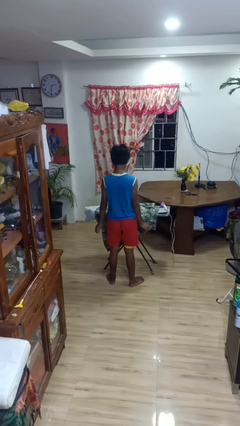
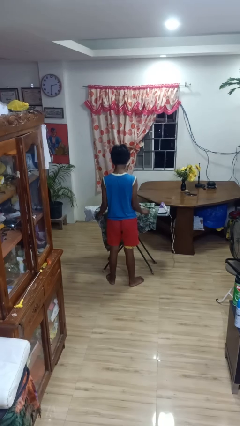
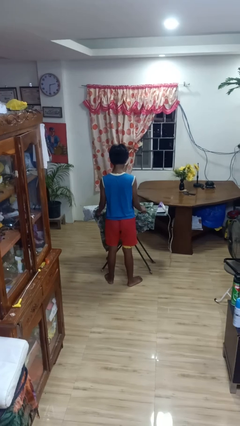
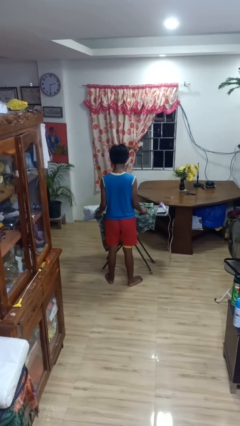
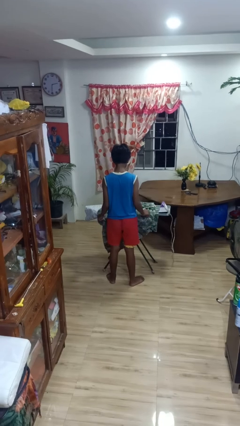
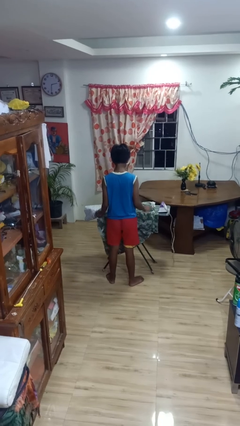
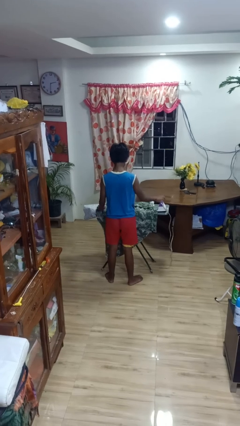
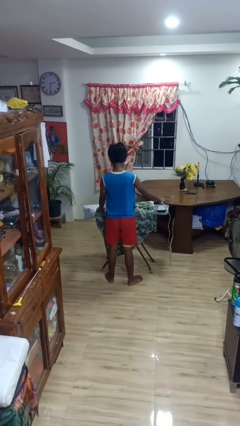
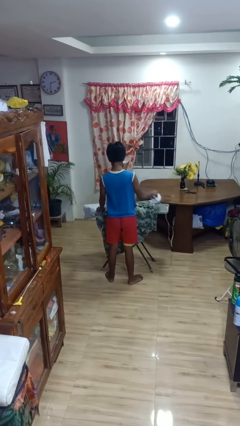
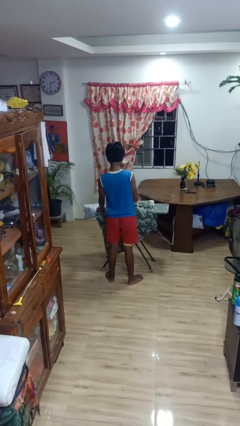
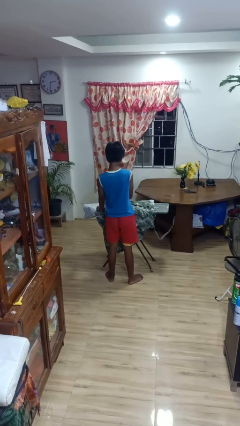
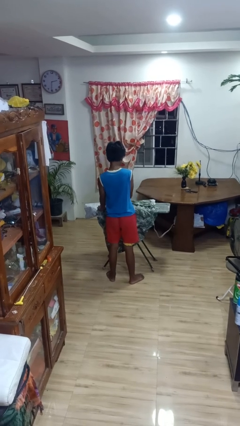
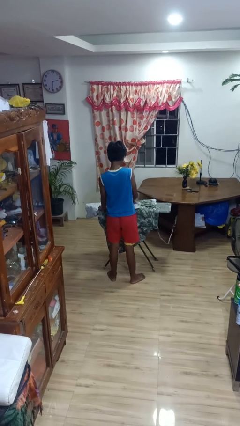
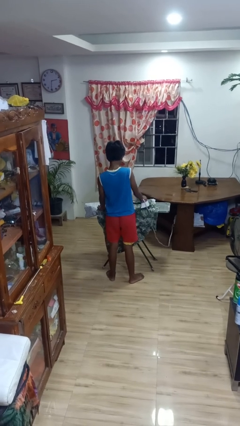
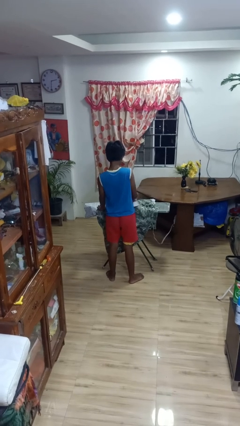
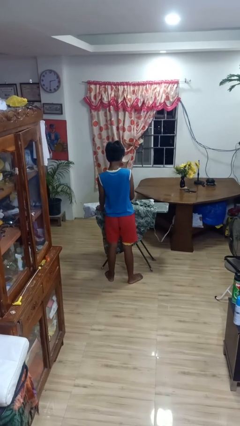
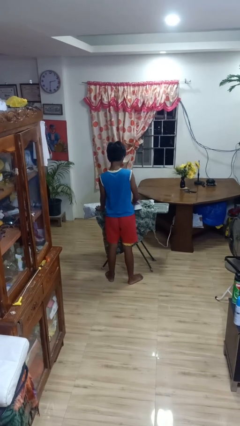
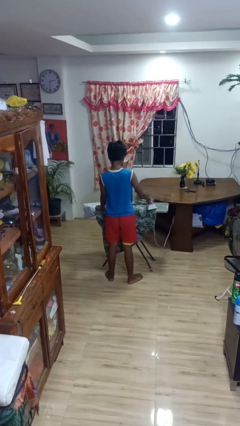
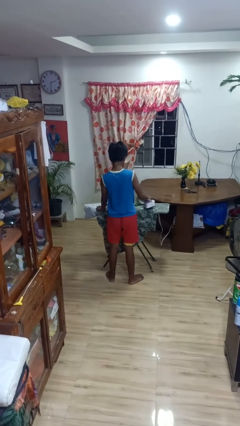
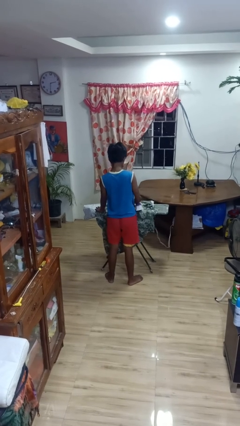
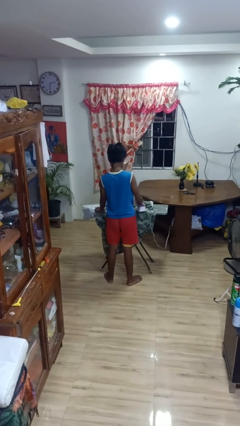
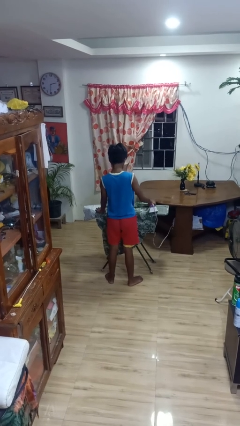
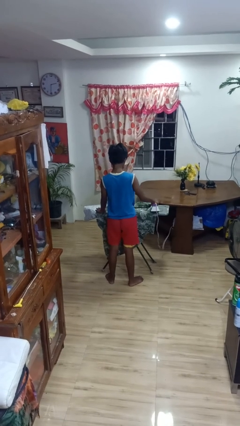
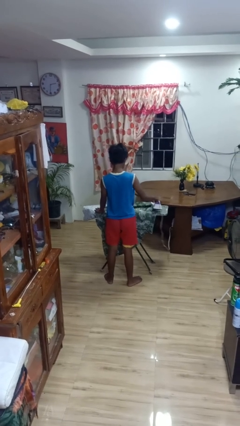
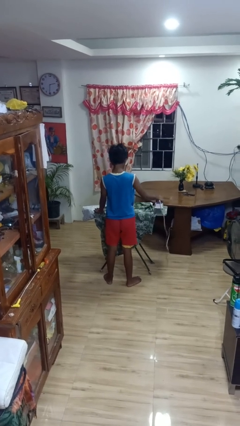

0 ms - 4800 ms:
person irons clothes

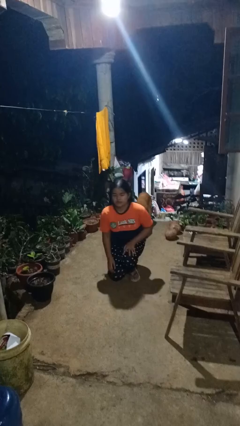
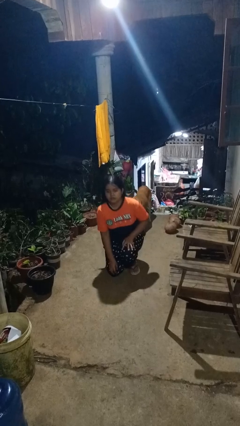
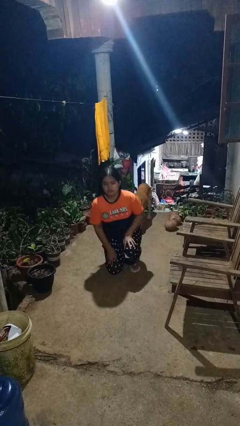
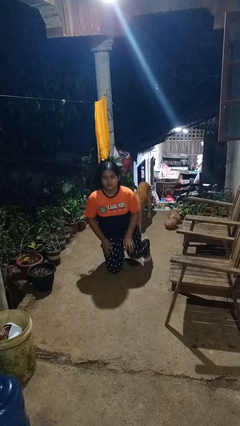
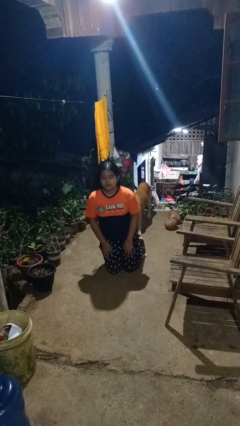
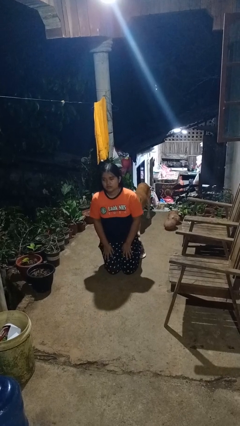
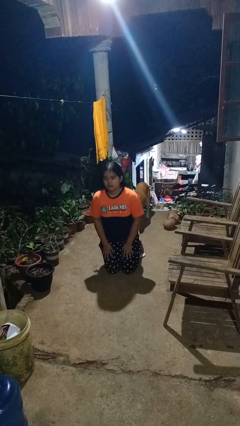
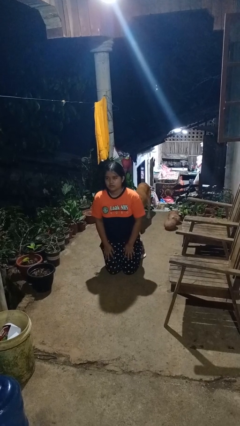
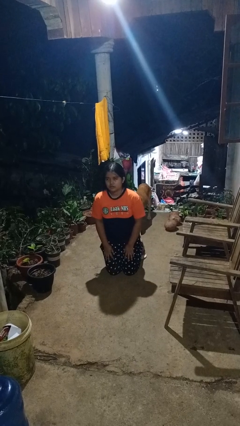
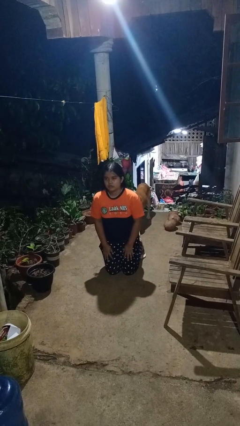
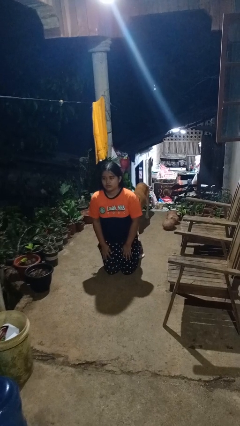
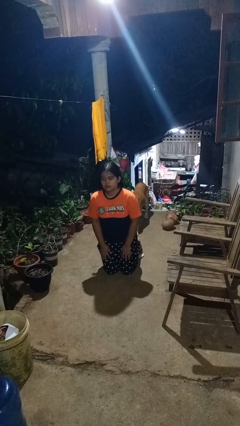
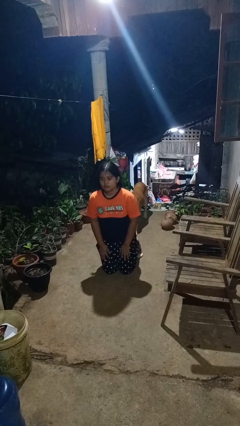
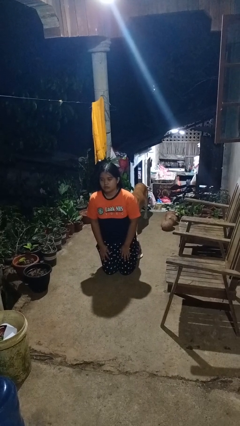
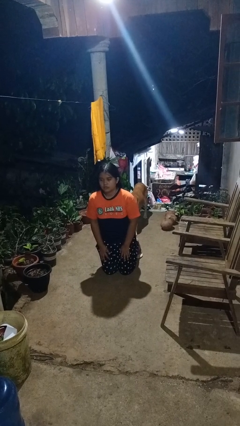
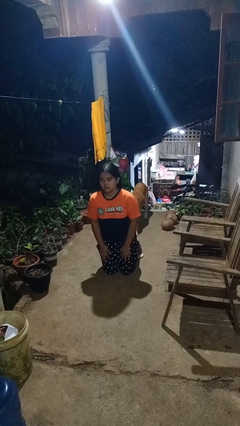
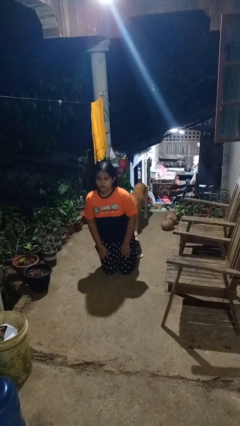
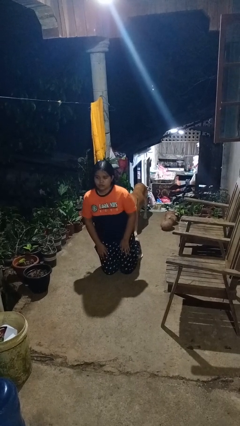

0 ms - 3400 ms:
person kneels

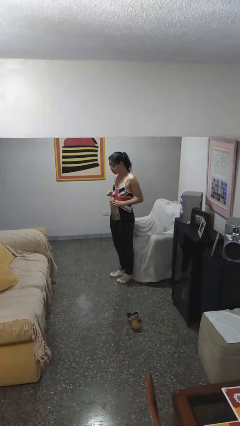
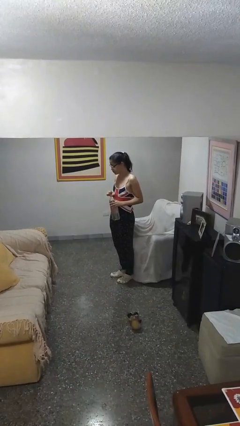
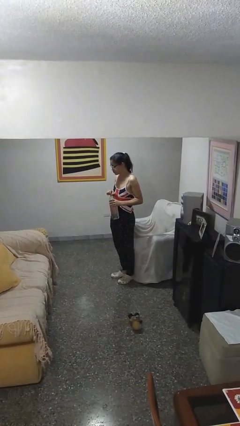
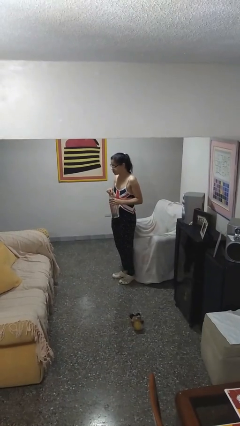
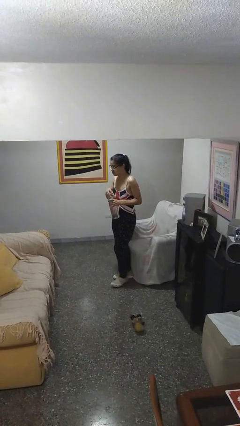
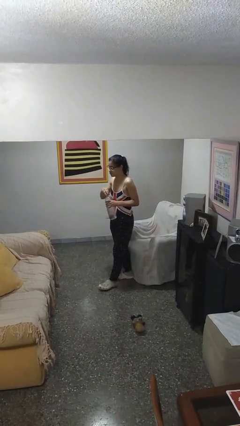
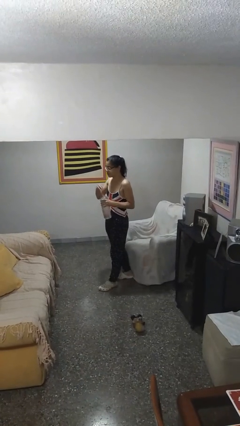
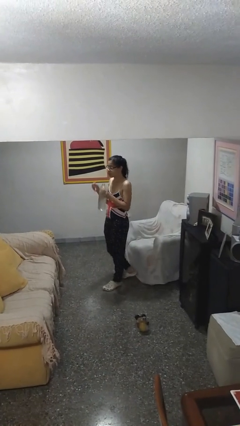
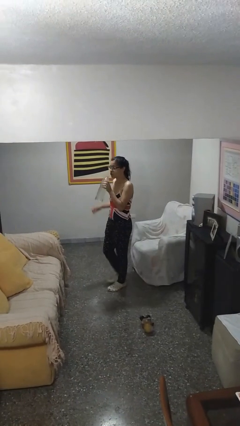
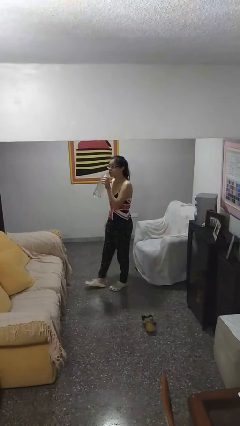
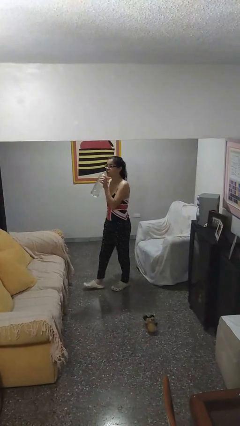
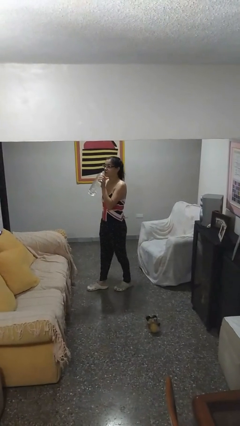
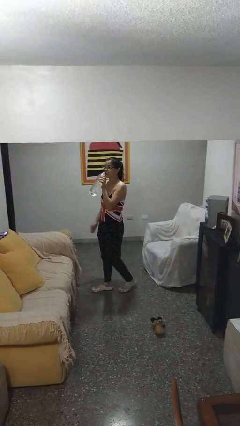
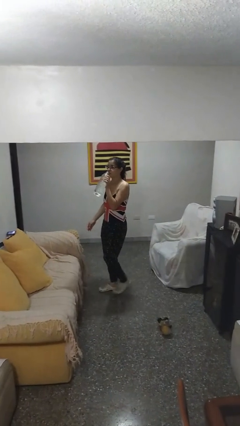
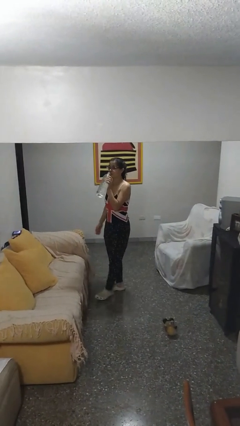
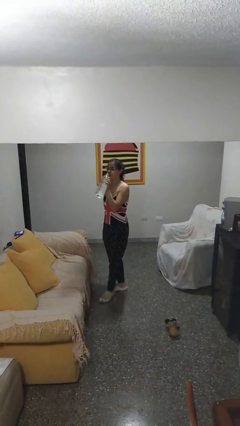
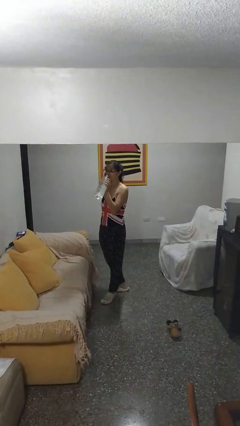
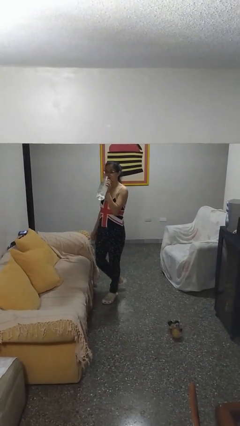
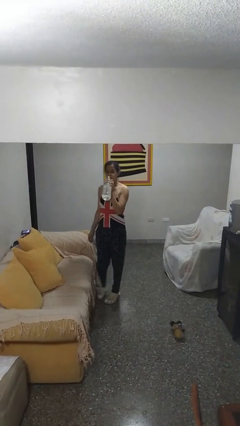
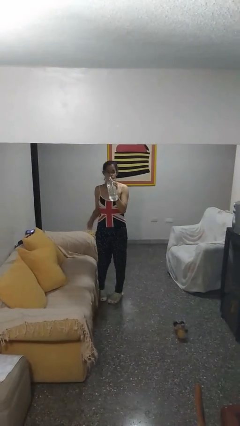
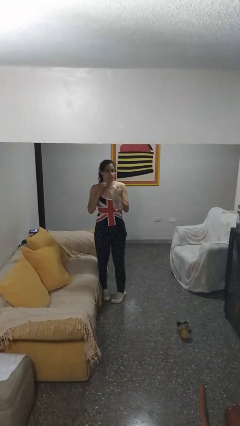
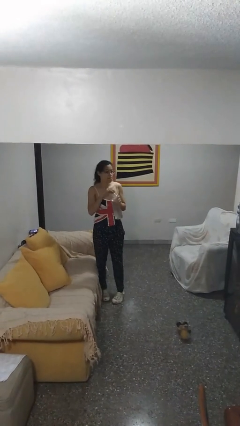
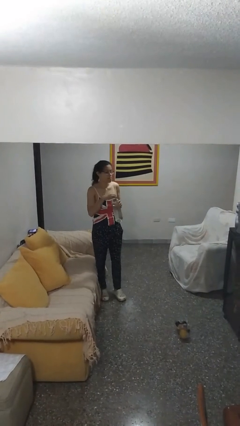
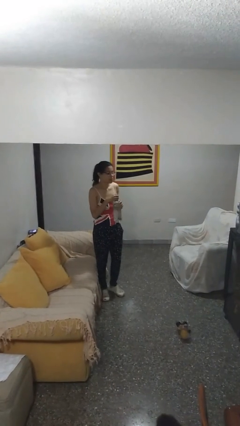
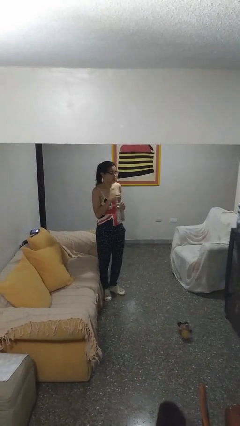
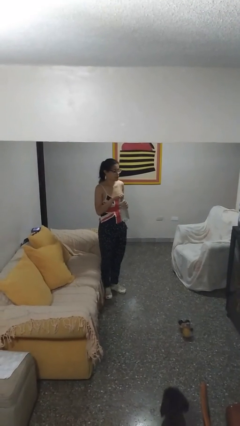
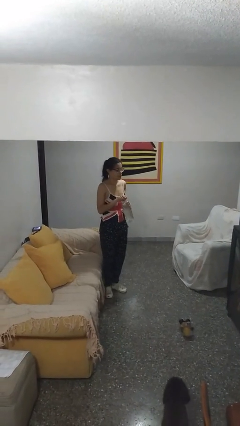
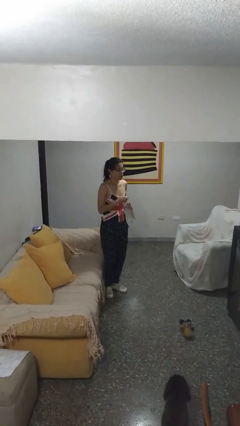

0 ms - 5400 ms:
person drinks from bottle

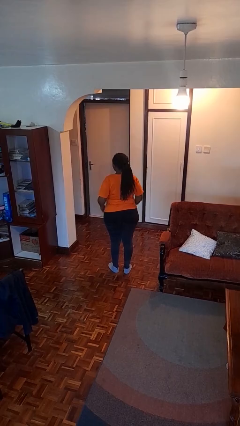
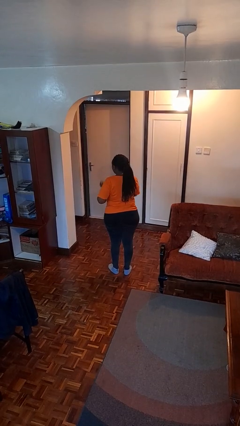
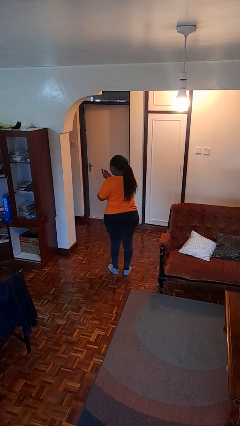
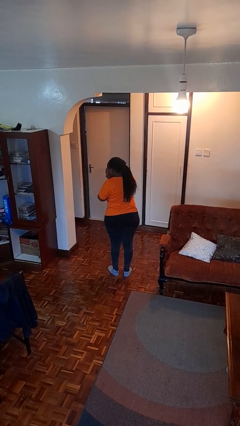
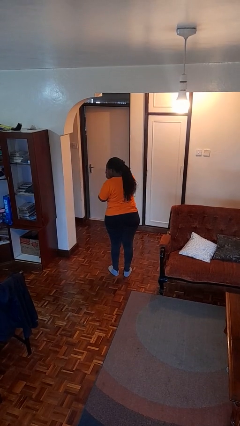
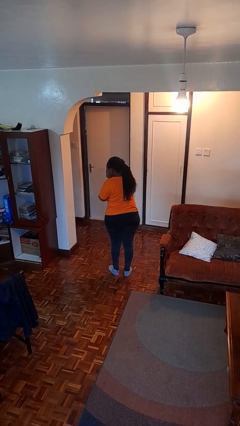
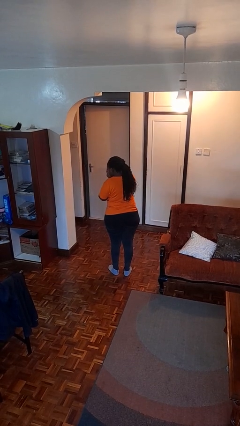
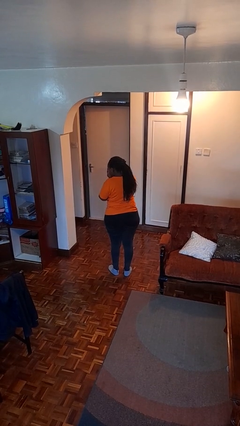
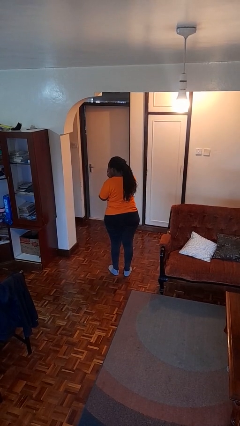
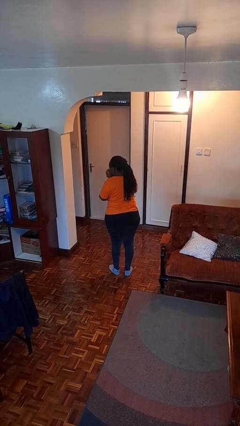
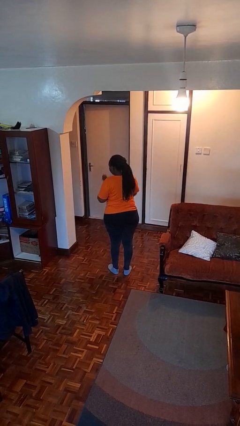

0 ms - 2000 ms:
person sneezes into hand

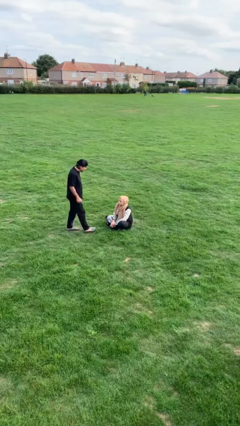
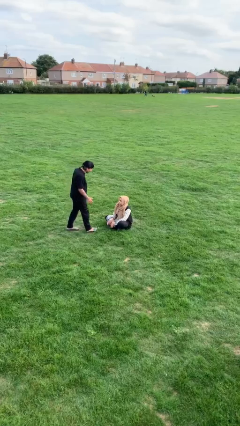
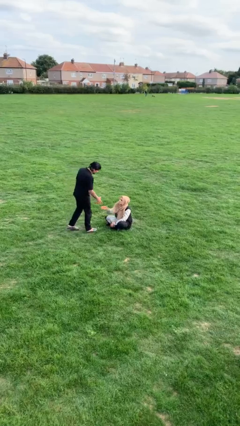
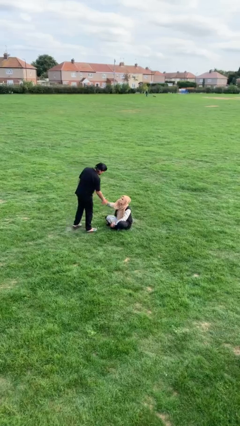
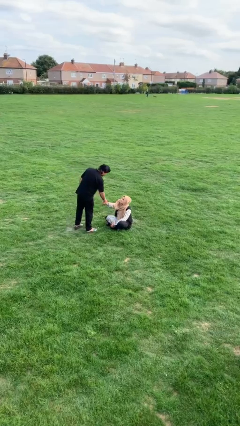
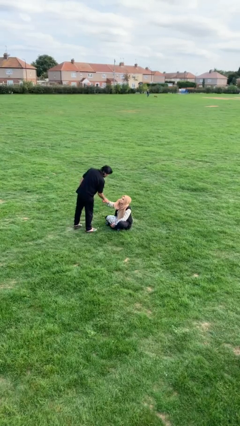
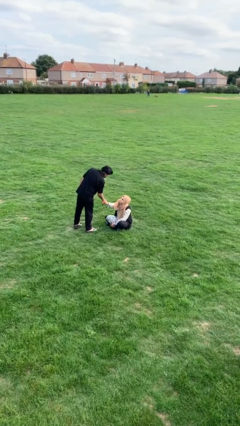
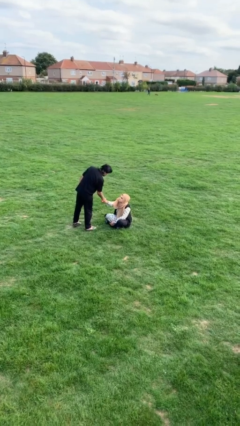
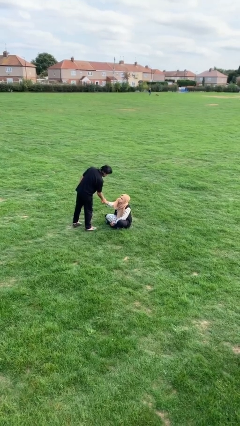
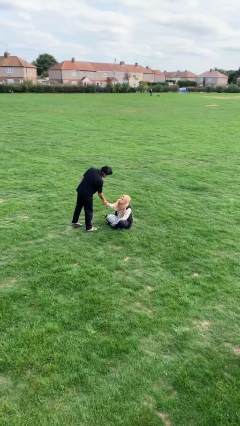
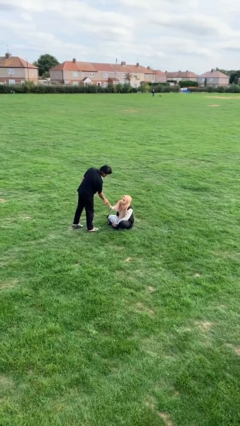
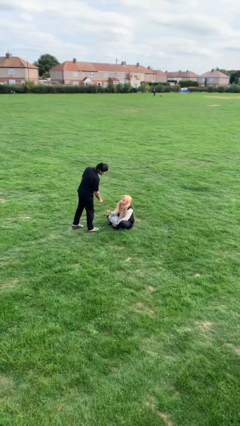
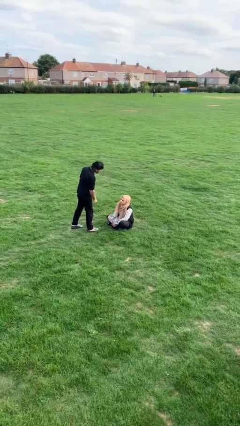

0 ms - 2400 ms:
person shakes hand
